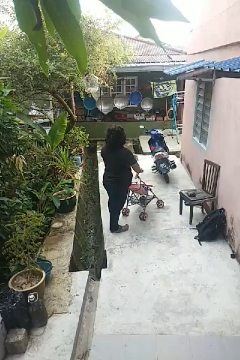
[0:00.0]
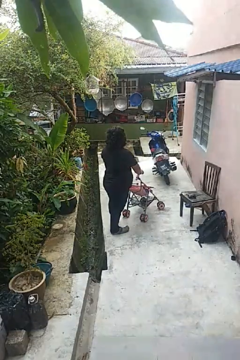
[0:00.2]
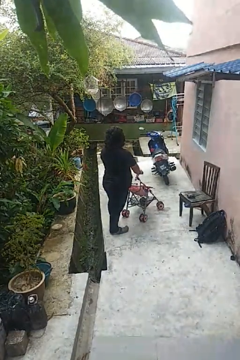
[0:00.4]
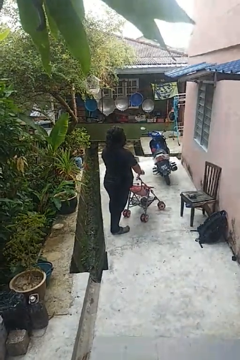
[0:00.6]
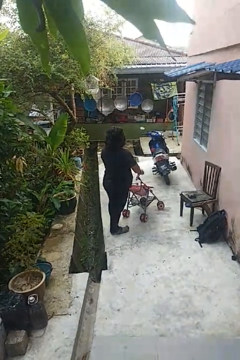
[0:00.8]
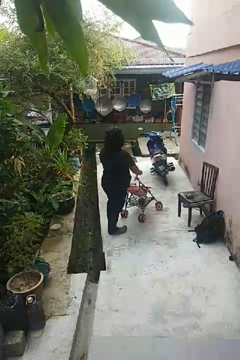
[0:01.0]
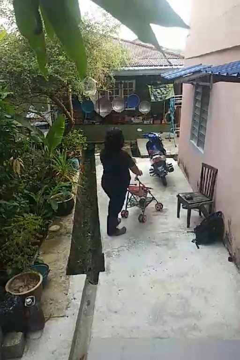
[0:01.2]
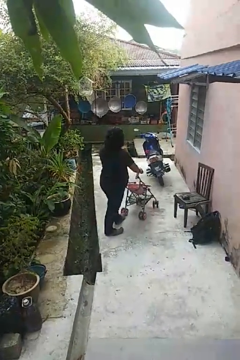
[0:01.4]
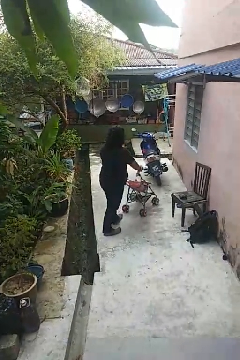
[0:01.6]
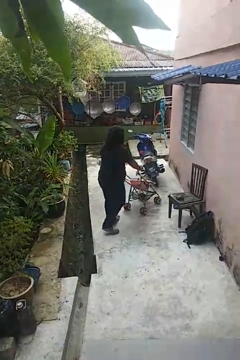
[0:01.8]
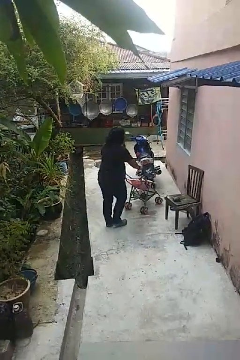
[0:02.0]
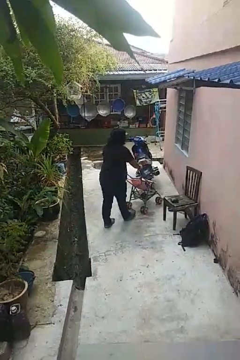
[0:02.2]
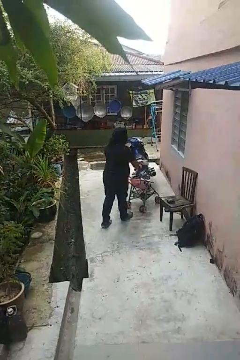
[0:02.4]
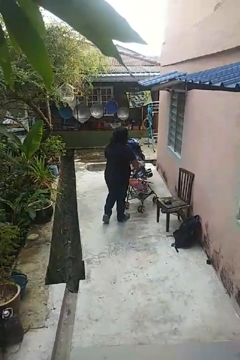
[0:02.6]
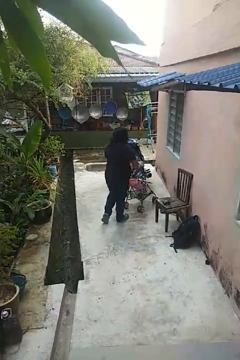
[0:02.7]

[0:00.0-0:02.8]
person pushes wheeled cart

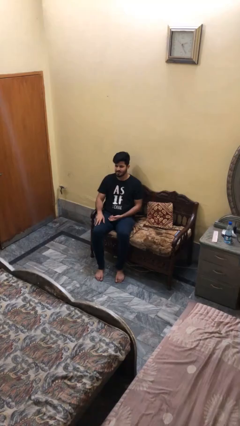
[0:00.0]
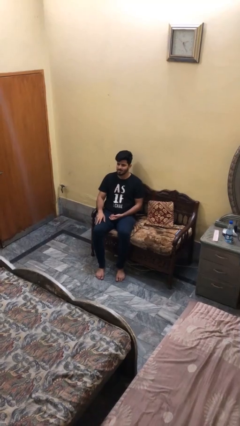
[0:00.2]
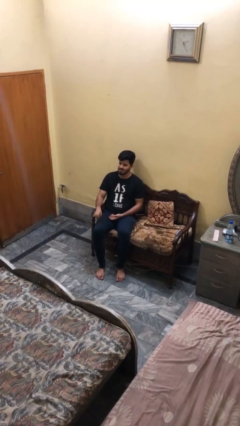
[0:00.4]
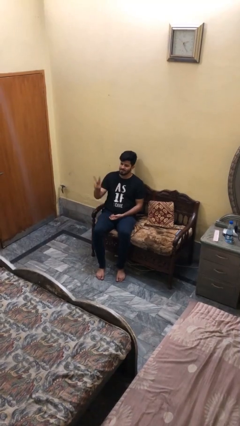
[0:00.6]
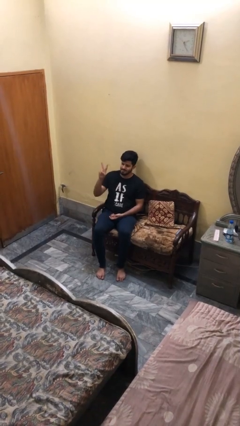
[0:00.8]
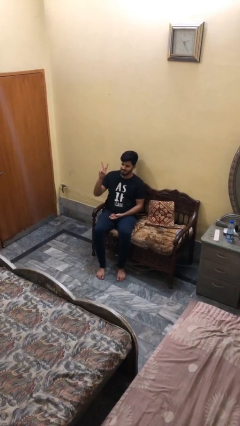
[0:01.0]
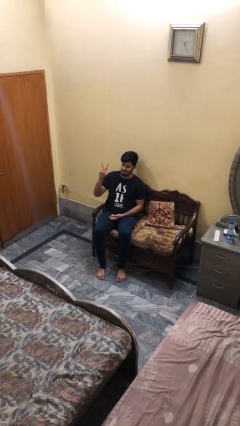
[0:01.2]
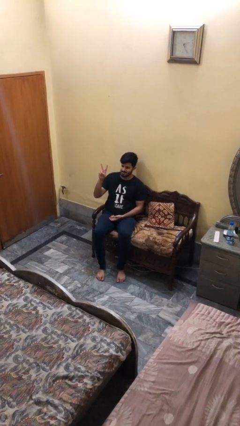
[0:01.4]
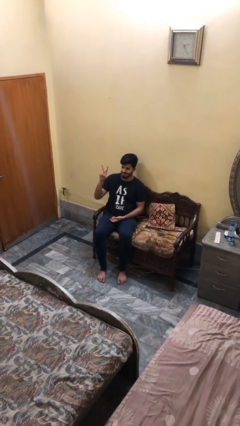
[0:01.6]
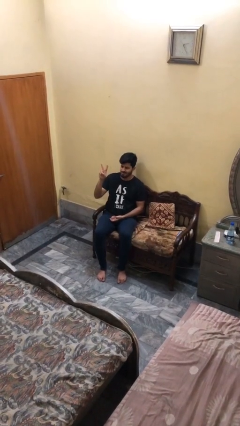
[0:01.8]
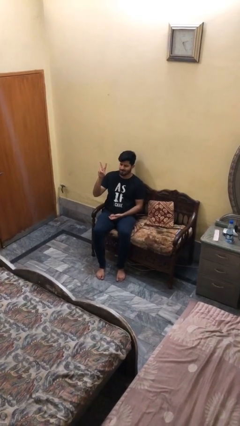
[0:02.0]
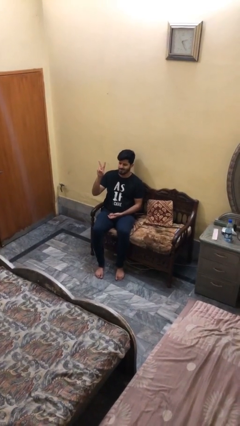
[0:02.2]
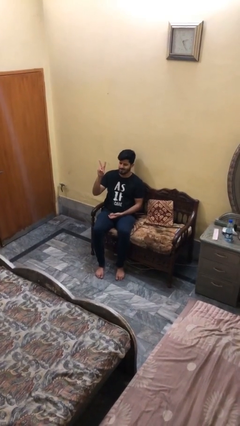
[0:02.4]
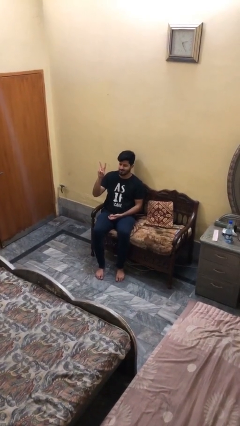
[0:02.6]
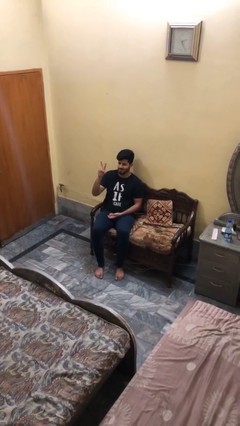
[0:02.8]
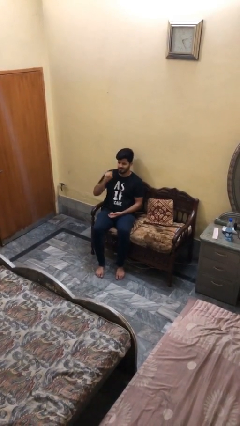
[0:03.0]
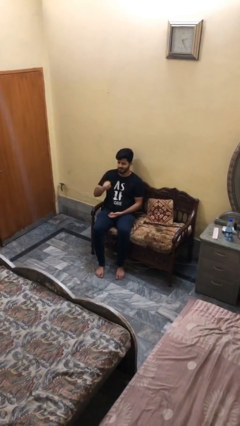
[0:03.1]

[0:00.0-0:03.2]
person gestures peace

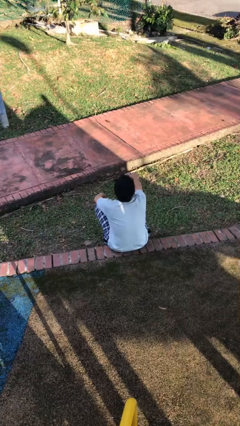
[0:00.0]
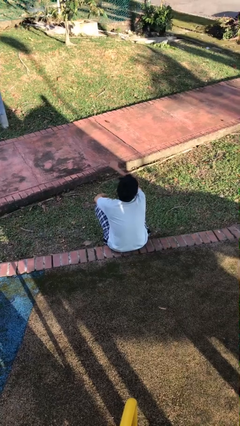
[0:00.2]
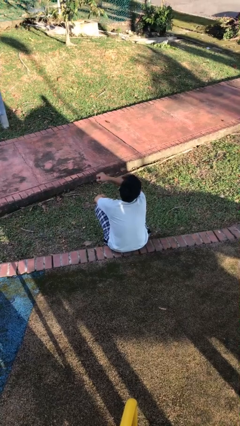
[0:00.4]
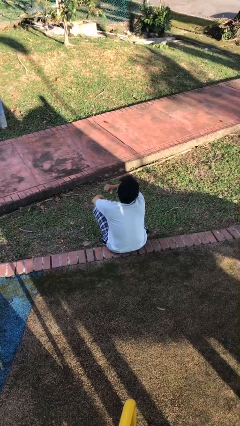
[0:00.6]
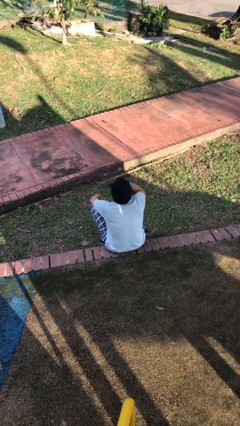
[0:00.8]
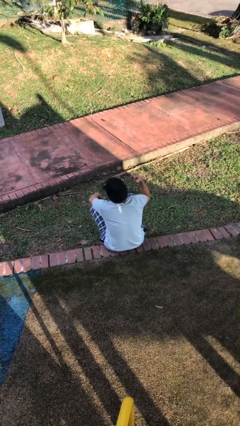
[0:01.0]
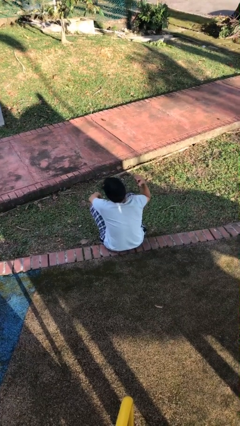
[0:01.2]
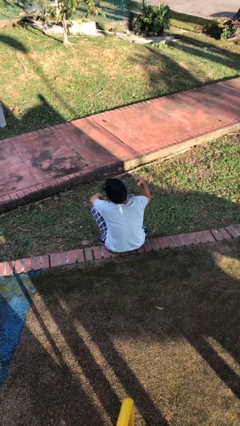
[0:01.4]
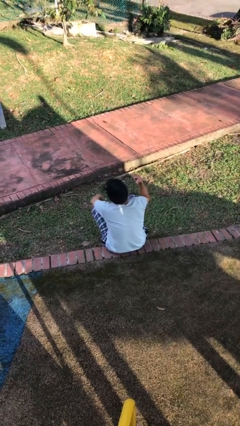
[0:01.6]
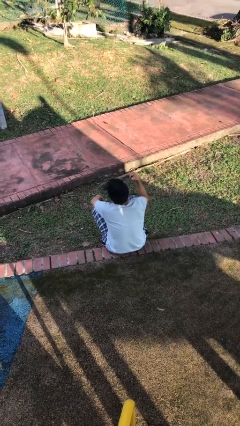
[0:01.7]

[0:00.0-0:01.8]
person gestures cut

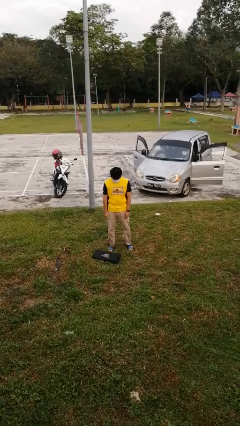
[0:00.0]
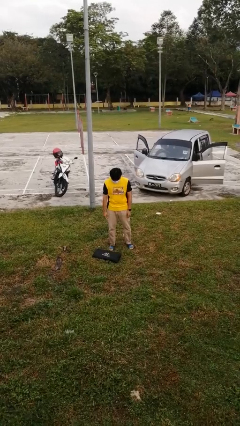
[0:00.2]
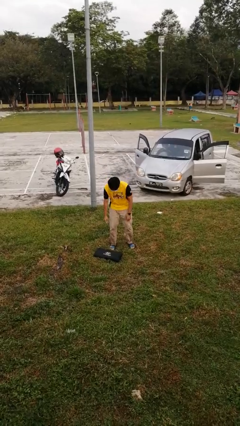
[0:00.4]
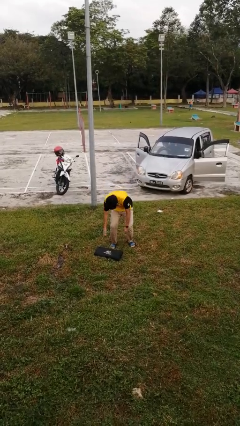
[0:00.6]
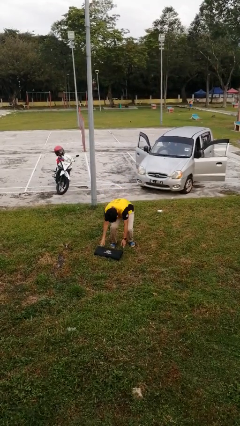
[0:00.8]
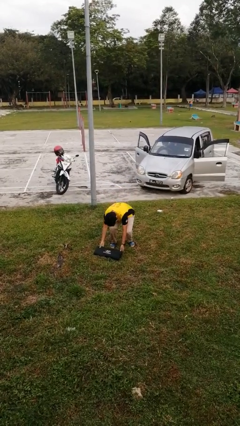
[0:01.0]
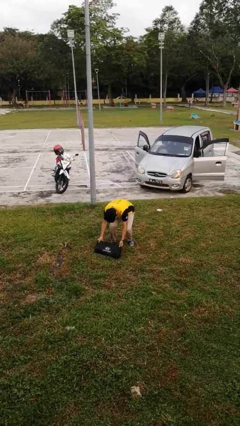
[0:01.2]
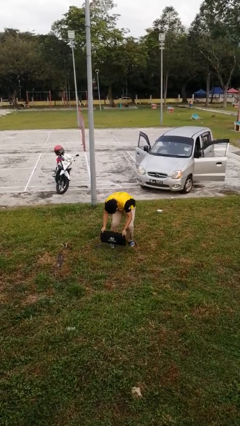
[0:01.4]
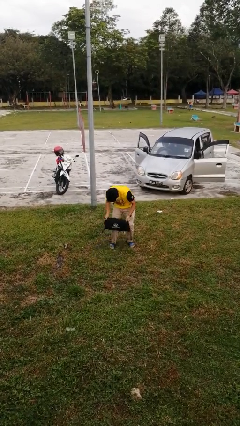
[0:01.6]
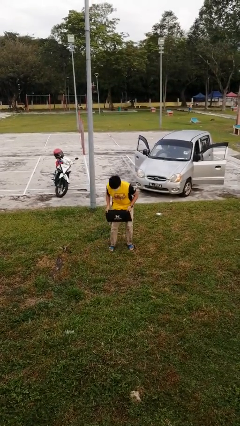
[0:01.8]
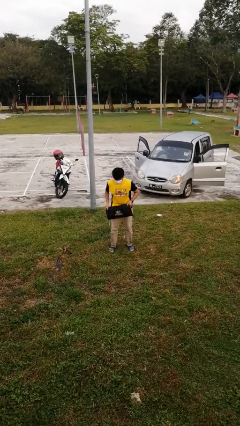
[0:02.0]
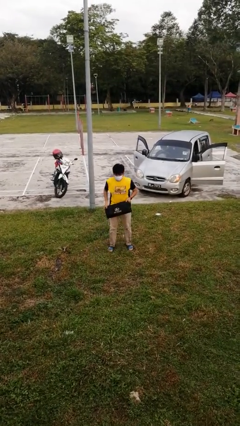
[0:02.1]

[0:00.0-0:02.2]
person picks up object from floor

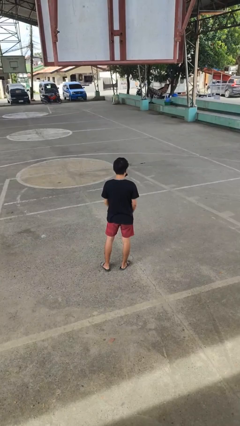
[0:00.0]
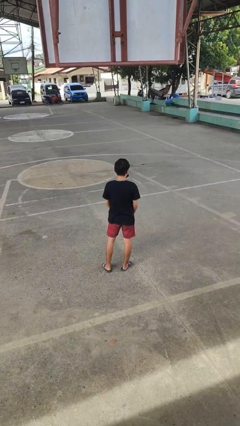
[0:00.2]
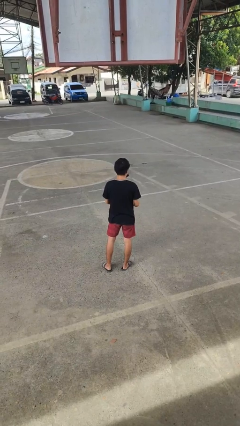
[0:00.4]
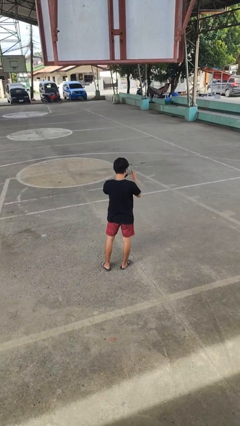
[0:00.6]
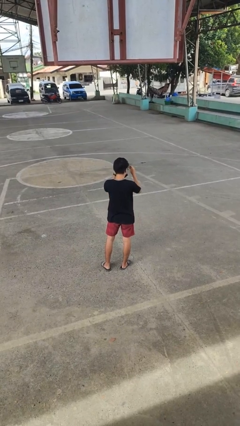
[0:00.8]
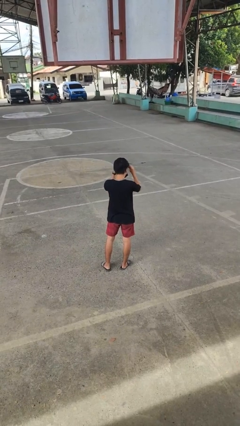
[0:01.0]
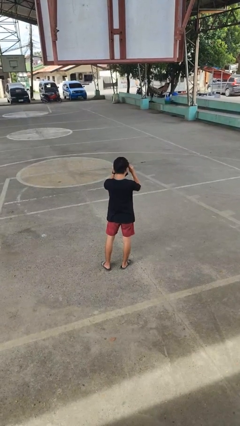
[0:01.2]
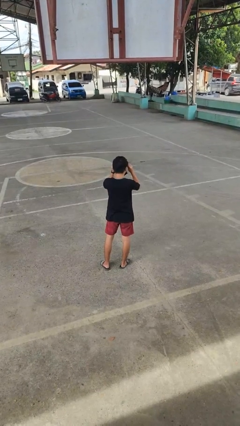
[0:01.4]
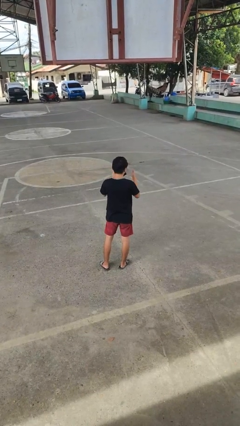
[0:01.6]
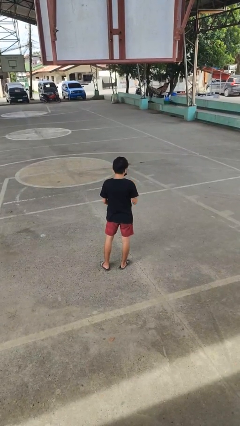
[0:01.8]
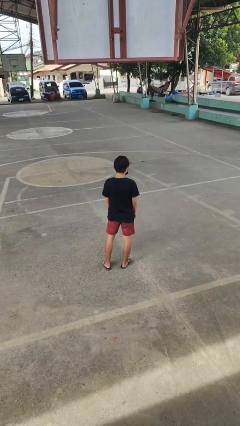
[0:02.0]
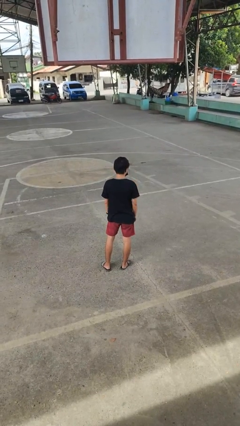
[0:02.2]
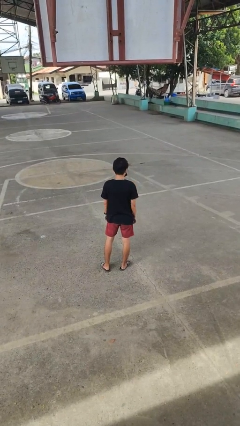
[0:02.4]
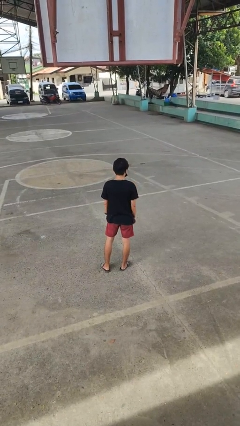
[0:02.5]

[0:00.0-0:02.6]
person puts on glasses

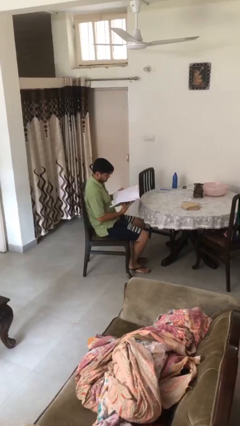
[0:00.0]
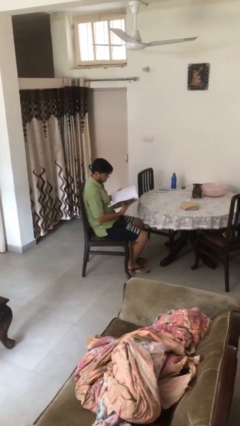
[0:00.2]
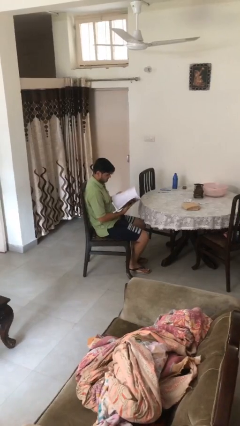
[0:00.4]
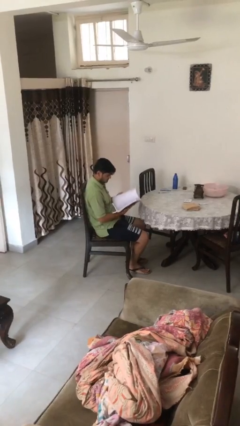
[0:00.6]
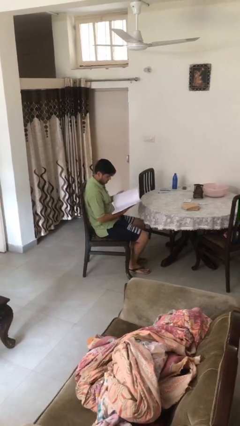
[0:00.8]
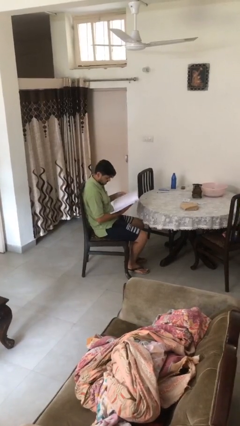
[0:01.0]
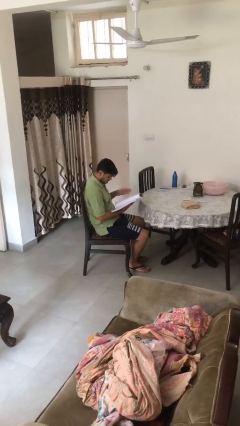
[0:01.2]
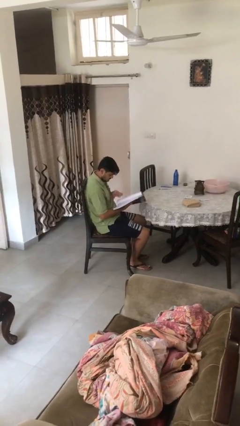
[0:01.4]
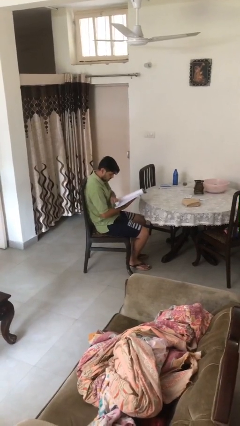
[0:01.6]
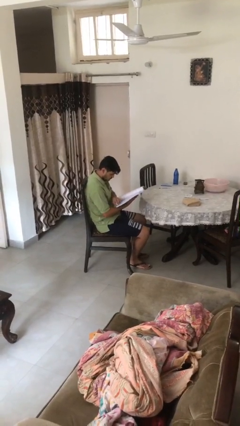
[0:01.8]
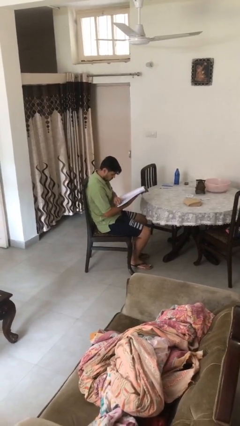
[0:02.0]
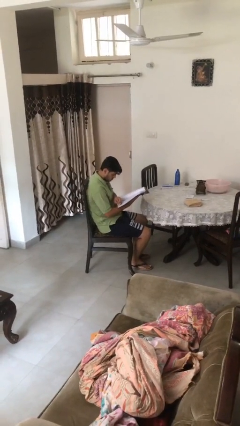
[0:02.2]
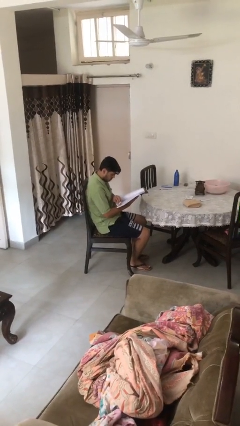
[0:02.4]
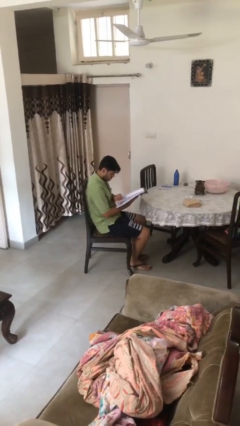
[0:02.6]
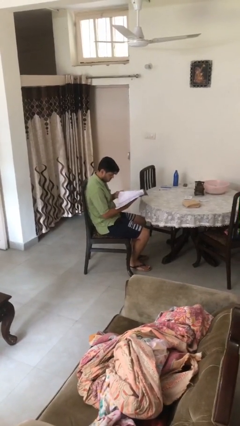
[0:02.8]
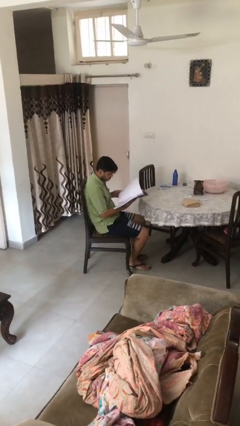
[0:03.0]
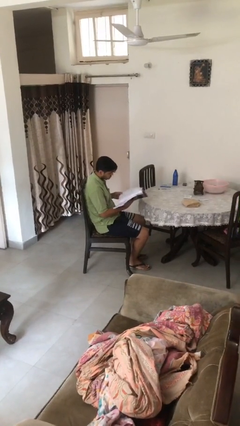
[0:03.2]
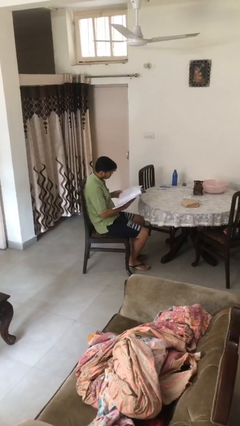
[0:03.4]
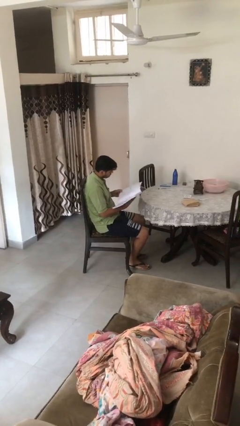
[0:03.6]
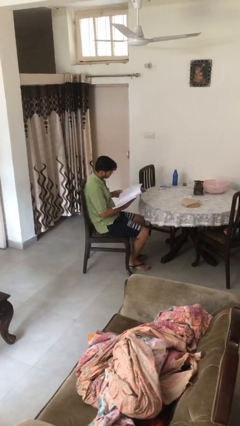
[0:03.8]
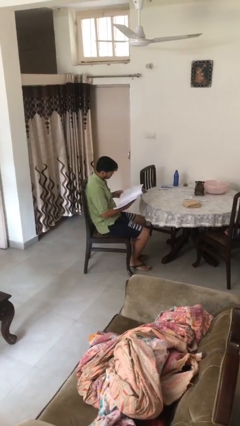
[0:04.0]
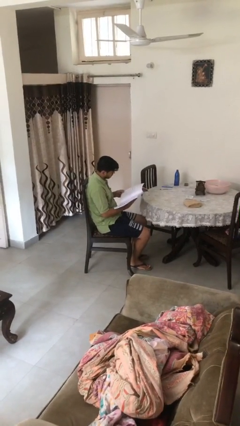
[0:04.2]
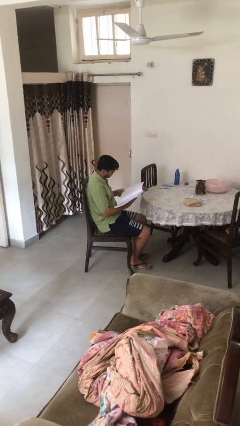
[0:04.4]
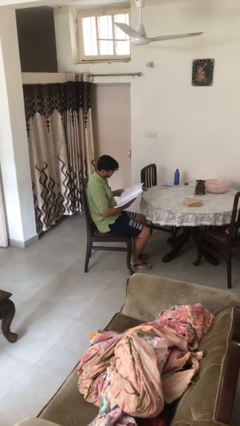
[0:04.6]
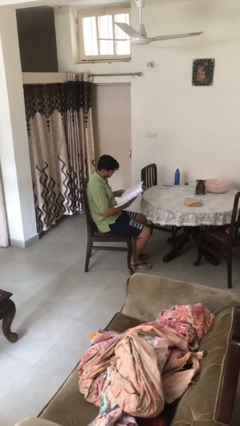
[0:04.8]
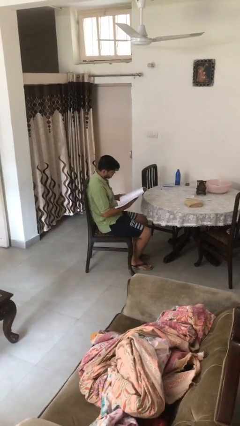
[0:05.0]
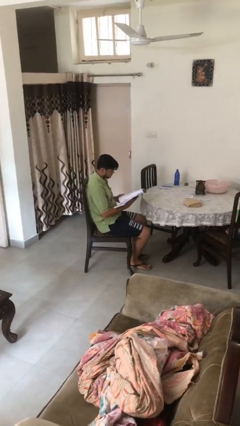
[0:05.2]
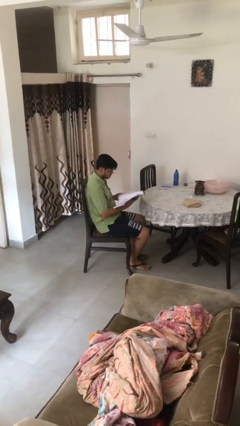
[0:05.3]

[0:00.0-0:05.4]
person reads document
